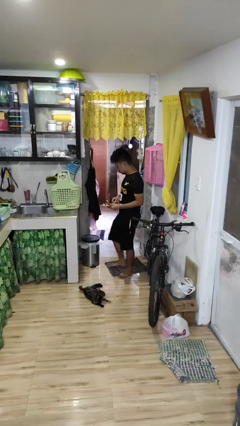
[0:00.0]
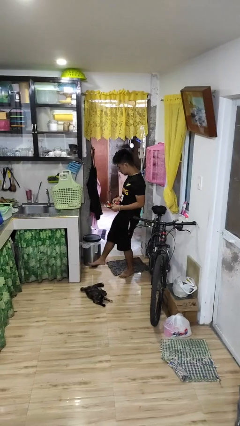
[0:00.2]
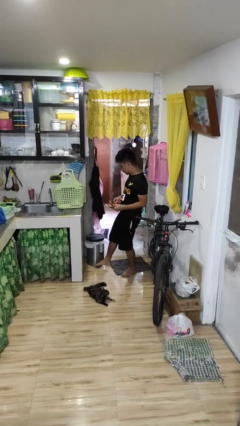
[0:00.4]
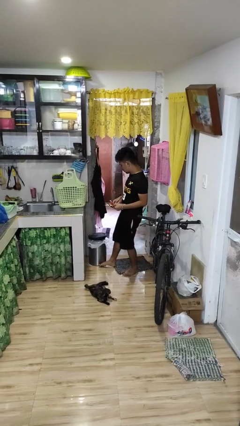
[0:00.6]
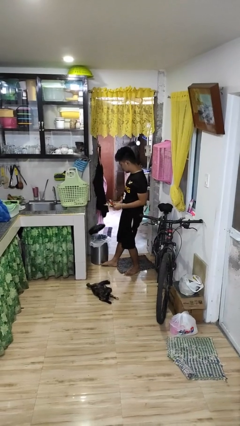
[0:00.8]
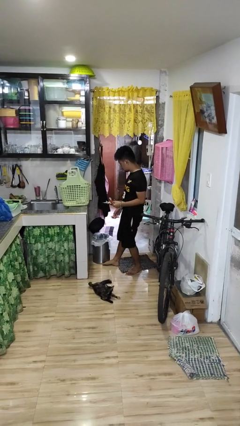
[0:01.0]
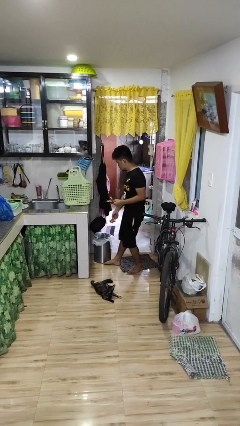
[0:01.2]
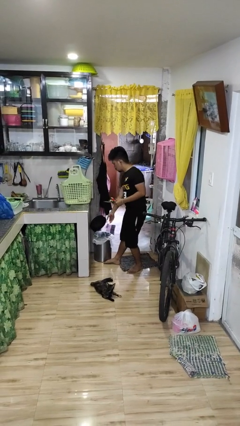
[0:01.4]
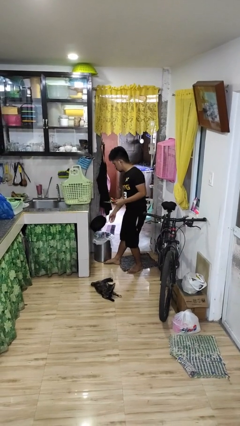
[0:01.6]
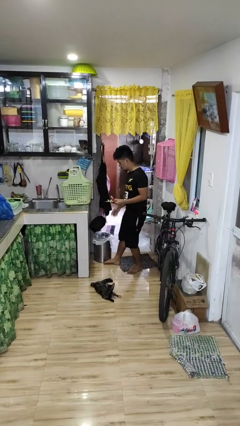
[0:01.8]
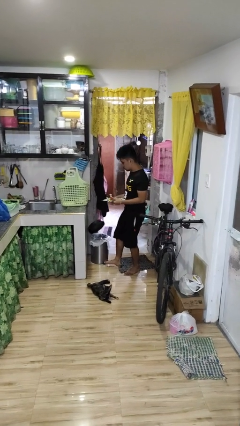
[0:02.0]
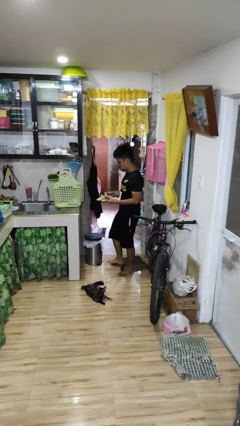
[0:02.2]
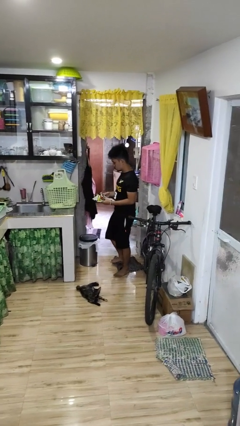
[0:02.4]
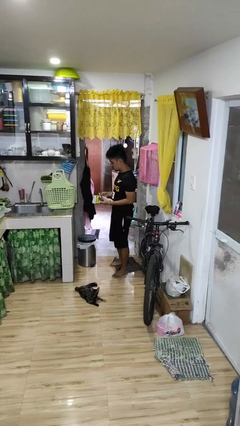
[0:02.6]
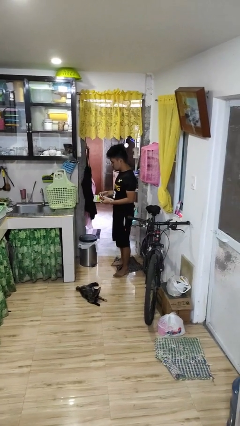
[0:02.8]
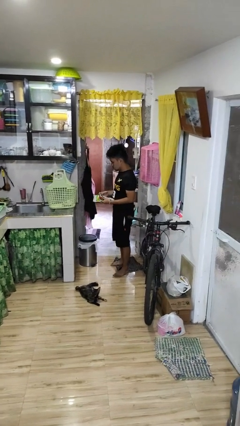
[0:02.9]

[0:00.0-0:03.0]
person discards trash

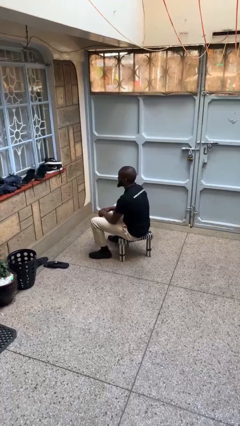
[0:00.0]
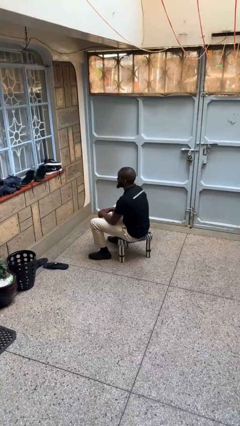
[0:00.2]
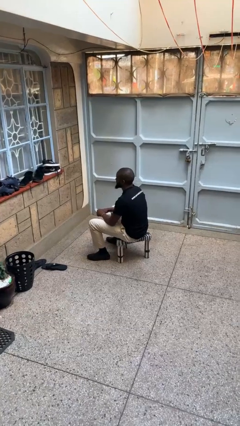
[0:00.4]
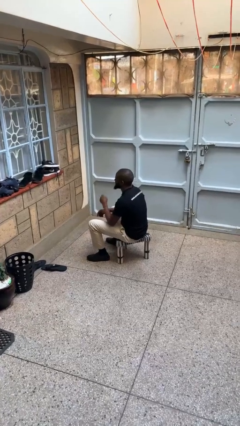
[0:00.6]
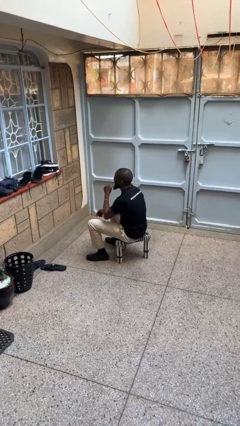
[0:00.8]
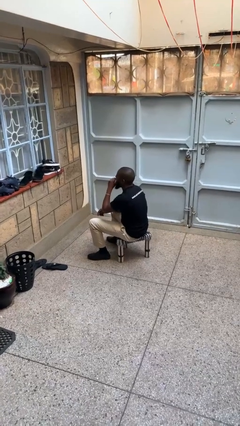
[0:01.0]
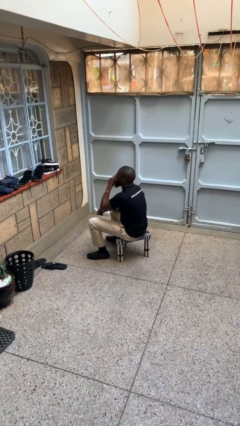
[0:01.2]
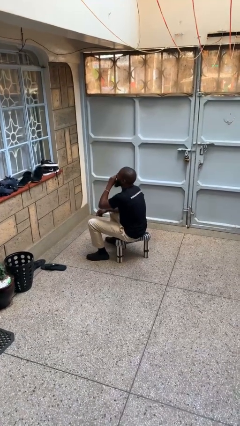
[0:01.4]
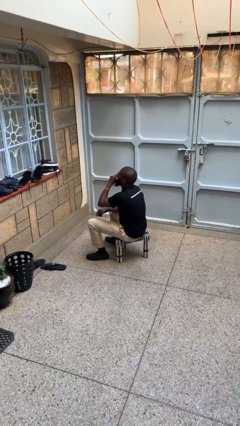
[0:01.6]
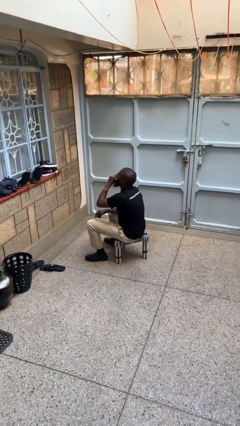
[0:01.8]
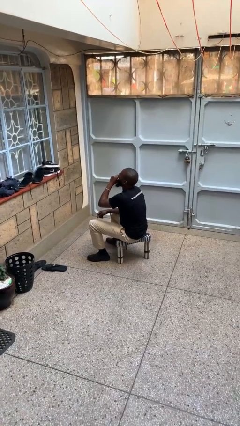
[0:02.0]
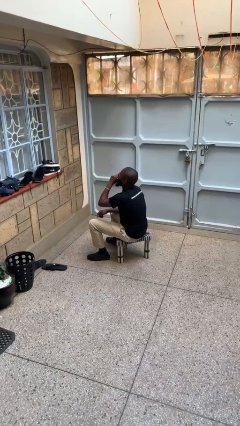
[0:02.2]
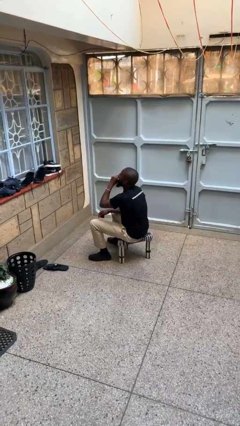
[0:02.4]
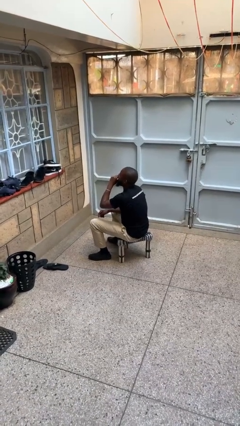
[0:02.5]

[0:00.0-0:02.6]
person yawns

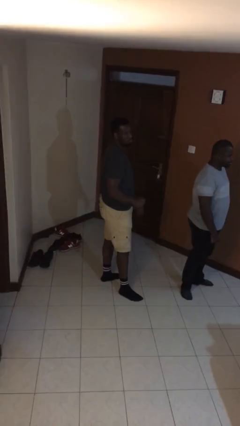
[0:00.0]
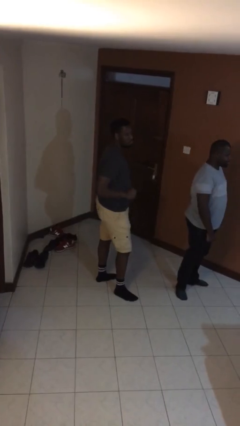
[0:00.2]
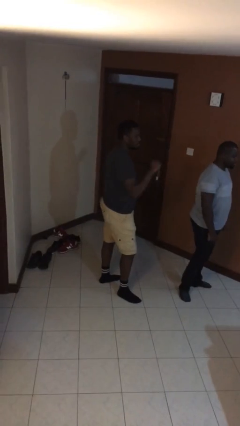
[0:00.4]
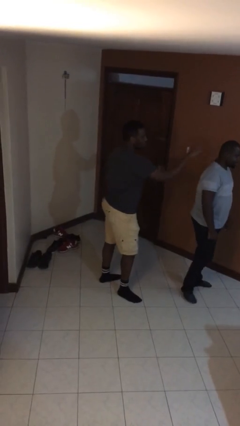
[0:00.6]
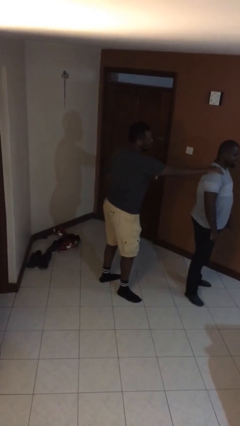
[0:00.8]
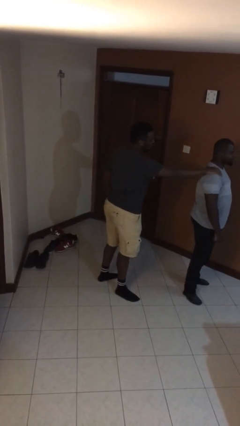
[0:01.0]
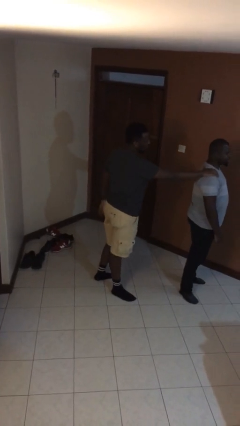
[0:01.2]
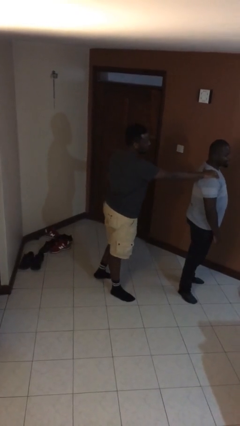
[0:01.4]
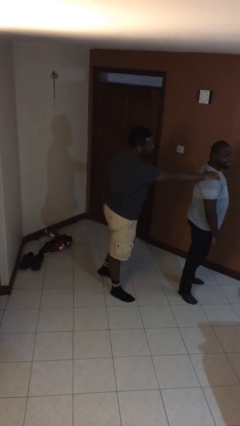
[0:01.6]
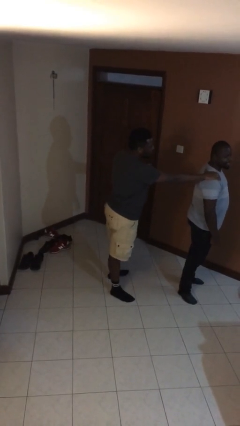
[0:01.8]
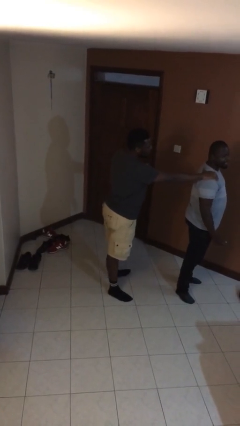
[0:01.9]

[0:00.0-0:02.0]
person grabs person by shoulder

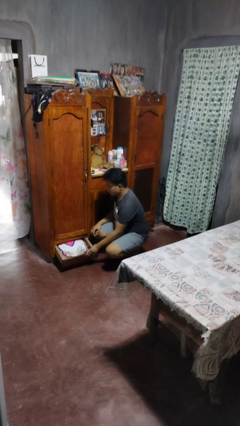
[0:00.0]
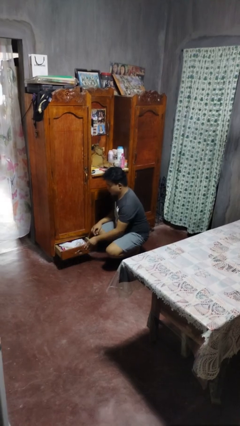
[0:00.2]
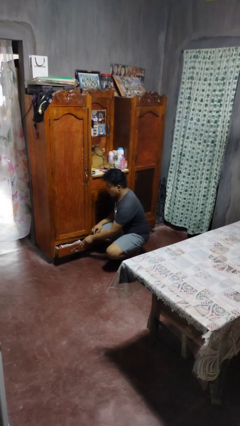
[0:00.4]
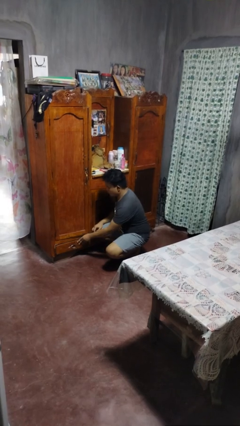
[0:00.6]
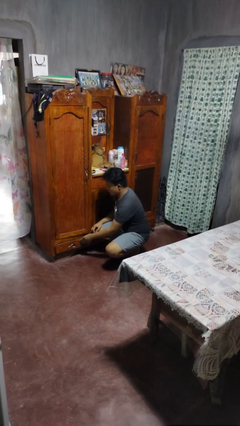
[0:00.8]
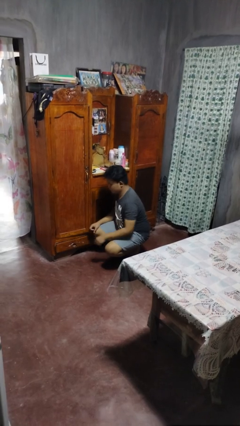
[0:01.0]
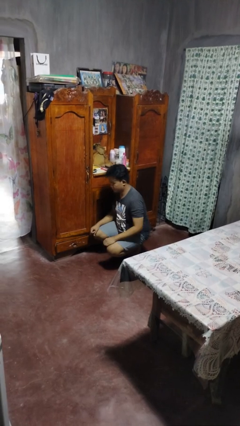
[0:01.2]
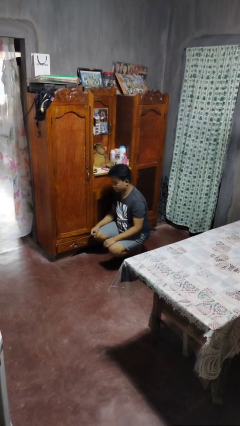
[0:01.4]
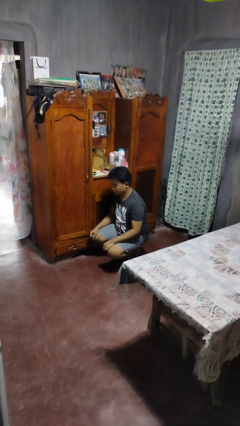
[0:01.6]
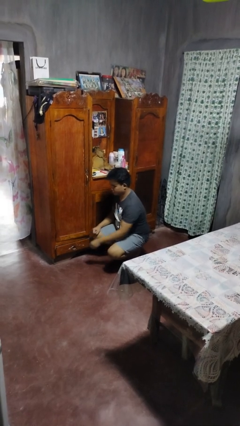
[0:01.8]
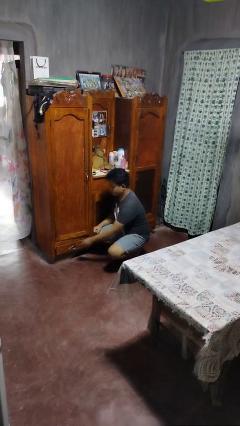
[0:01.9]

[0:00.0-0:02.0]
person closes dresser drawer

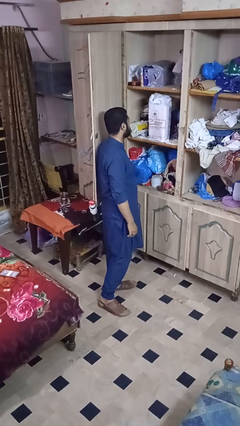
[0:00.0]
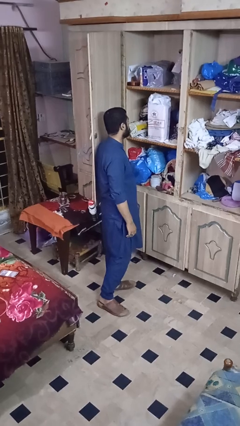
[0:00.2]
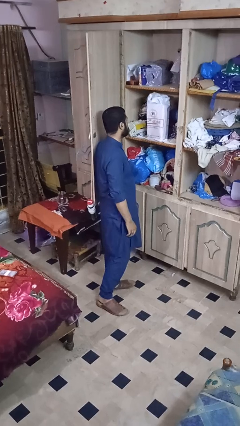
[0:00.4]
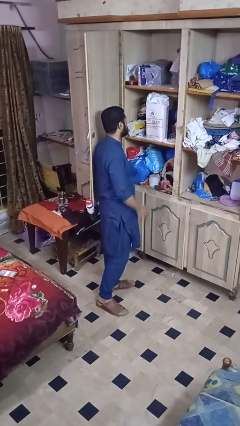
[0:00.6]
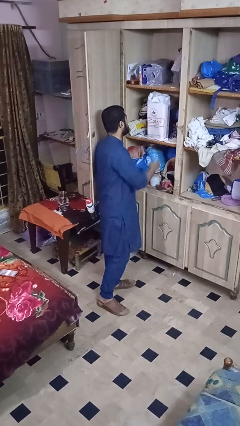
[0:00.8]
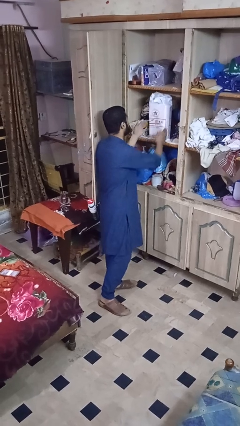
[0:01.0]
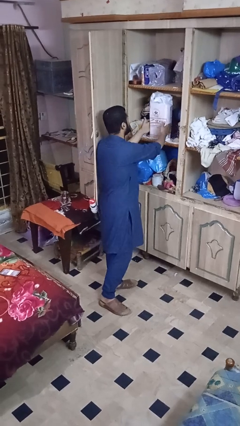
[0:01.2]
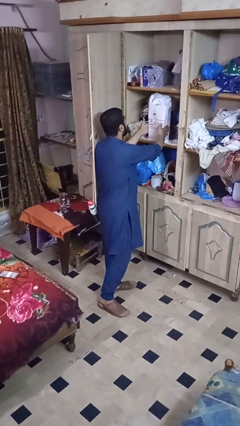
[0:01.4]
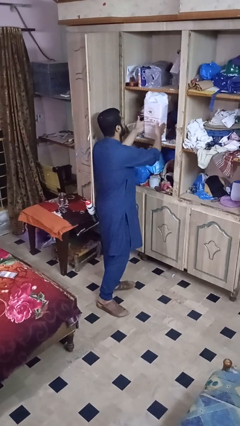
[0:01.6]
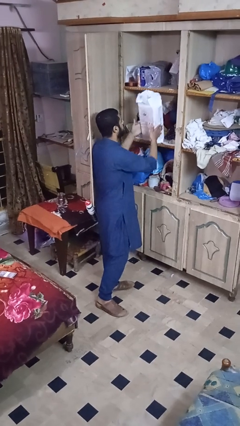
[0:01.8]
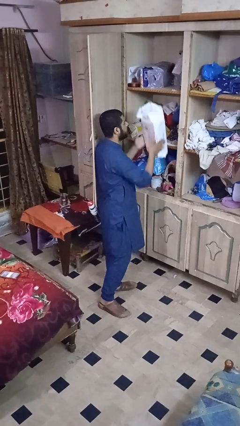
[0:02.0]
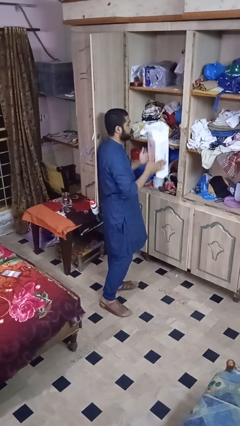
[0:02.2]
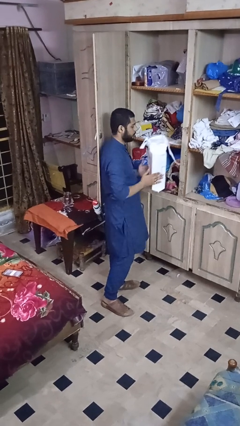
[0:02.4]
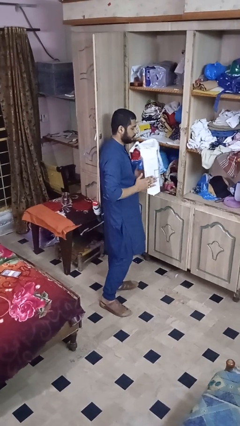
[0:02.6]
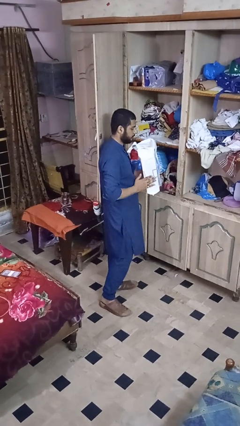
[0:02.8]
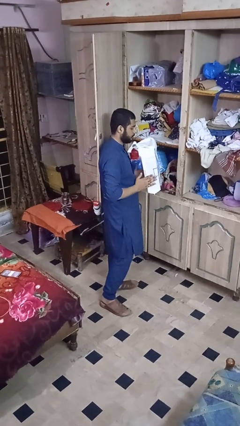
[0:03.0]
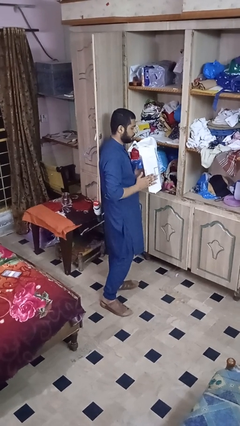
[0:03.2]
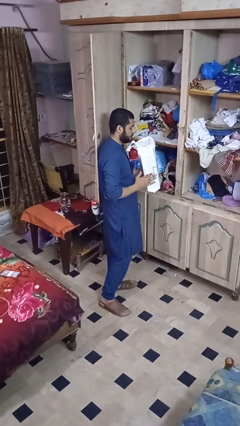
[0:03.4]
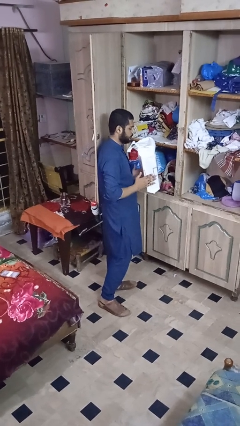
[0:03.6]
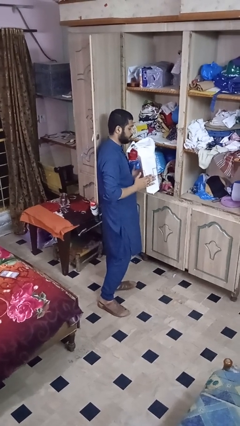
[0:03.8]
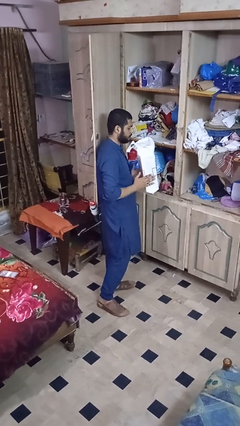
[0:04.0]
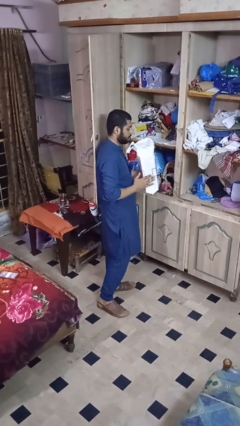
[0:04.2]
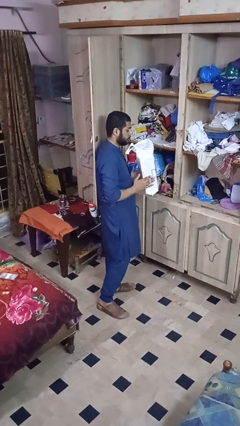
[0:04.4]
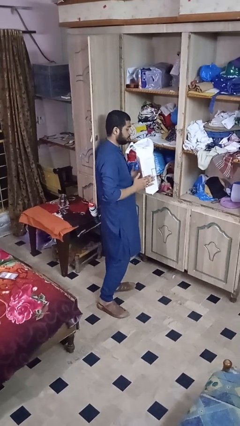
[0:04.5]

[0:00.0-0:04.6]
person picks up object from cabinet

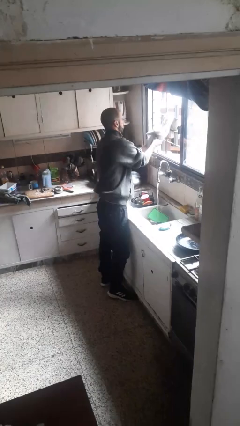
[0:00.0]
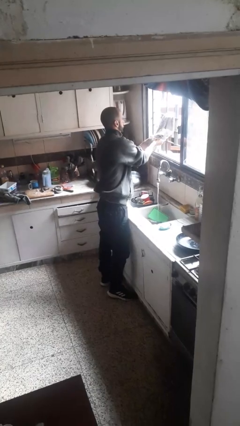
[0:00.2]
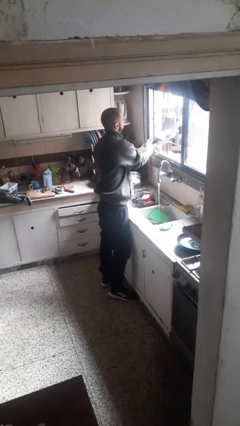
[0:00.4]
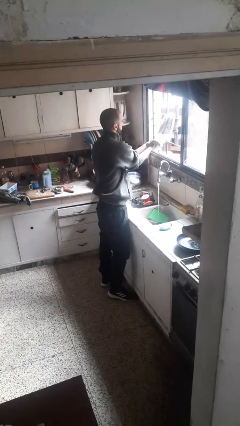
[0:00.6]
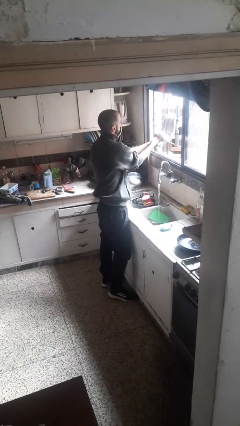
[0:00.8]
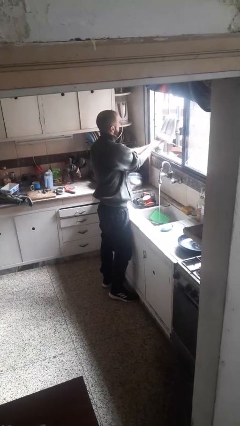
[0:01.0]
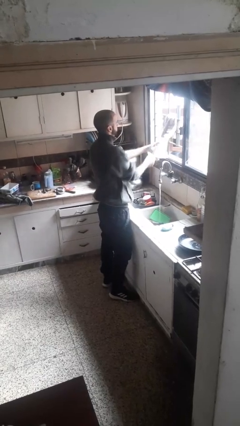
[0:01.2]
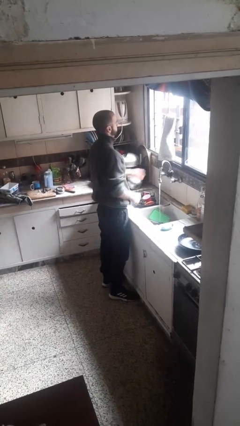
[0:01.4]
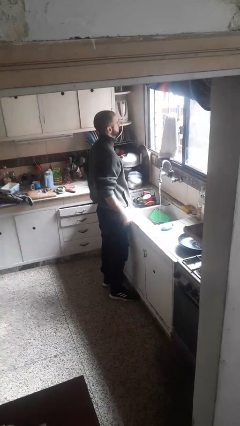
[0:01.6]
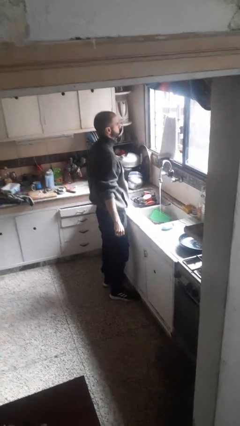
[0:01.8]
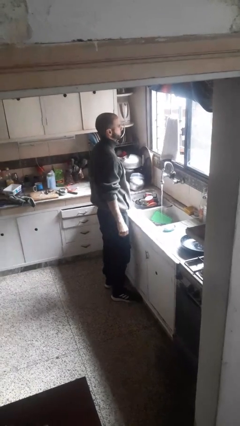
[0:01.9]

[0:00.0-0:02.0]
person dries hands with towel

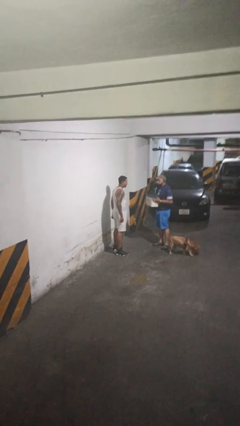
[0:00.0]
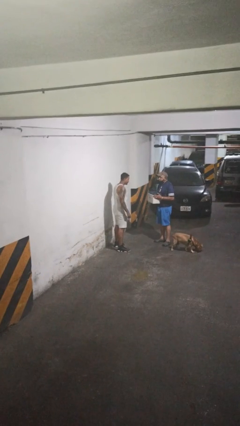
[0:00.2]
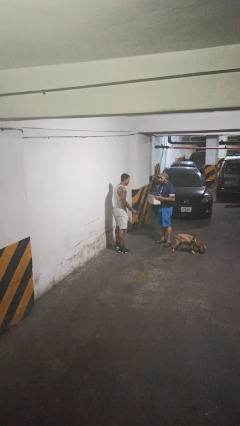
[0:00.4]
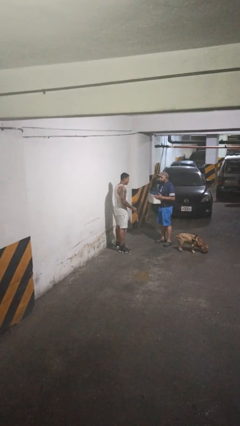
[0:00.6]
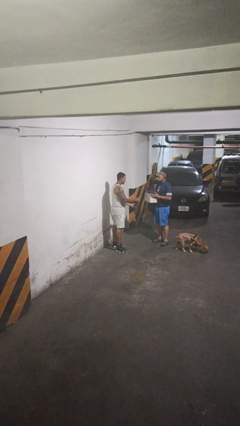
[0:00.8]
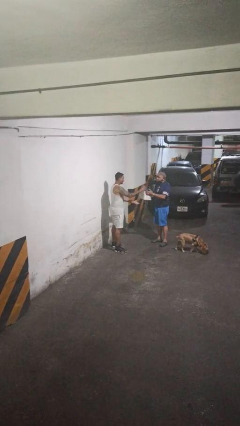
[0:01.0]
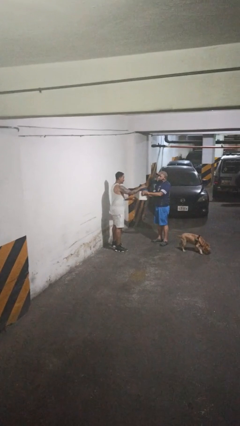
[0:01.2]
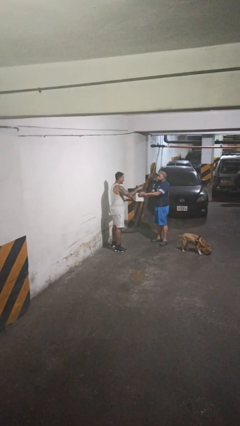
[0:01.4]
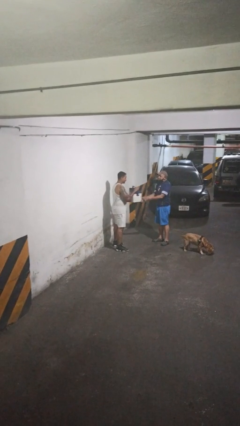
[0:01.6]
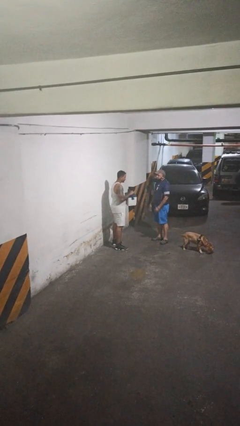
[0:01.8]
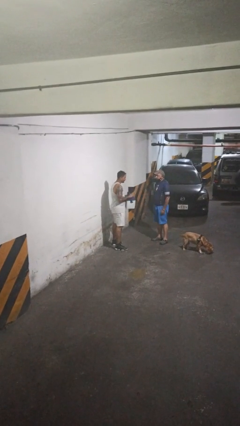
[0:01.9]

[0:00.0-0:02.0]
person transfers object to person
